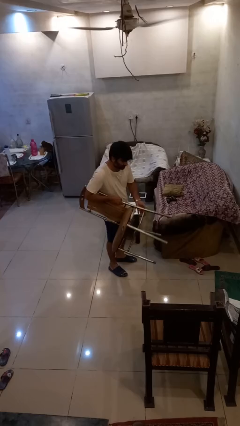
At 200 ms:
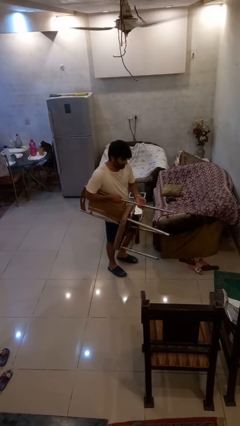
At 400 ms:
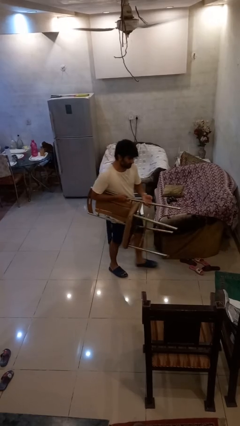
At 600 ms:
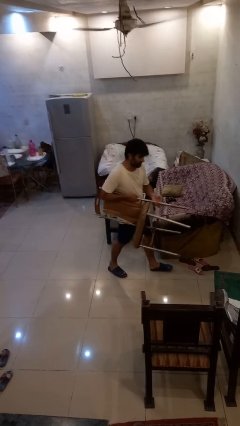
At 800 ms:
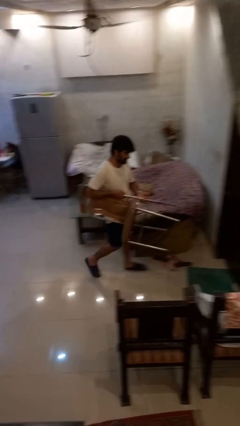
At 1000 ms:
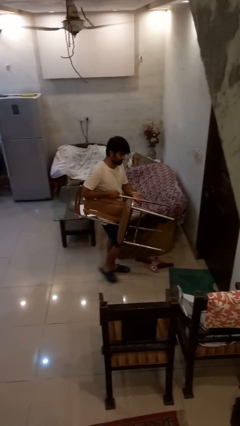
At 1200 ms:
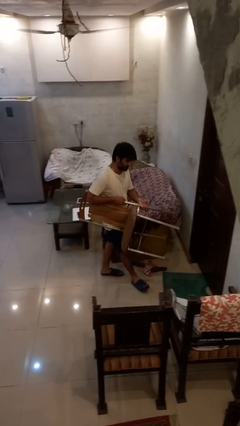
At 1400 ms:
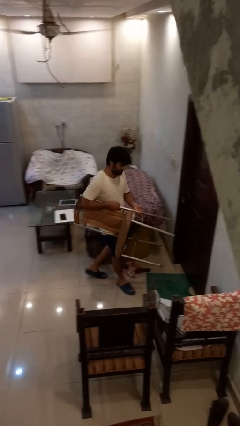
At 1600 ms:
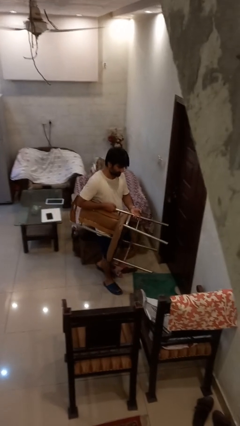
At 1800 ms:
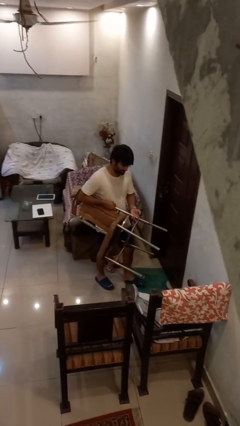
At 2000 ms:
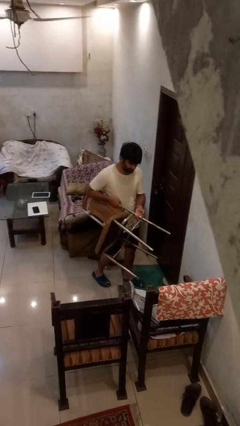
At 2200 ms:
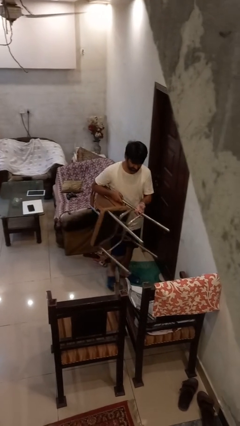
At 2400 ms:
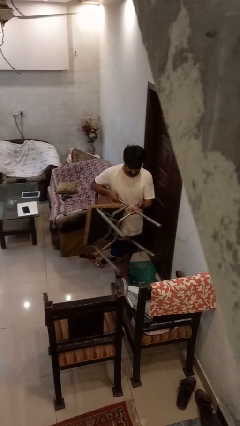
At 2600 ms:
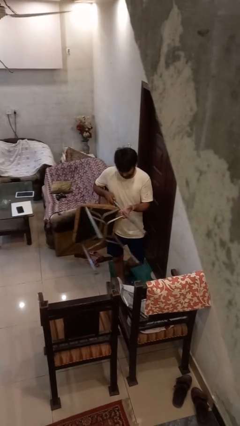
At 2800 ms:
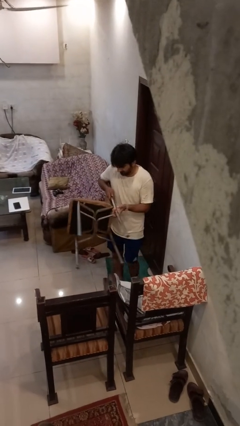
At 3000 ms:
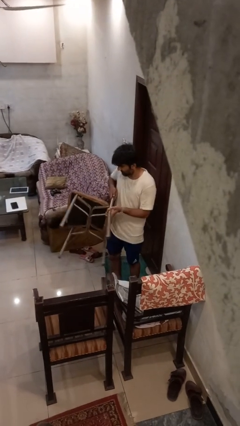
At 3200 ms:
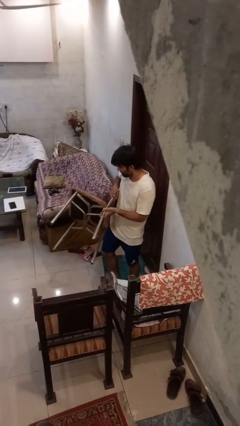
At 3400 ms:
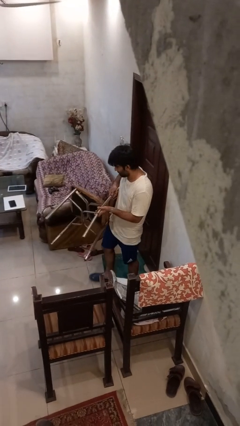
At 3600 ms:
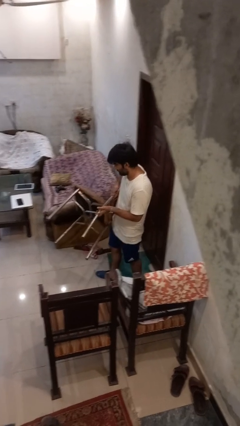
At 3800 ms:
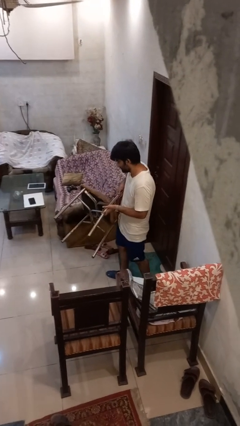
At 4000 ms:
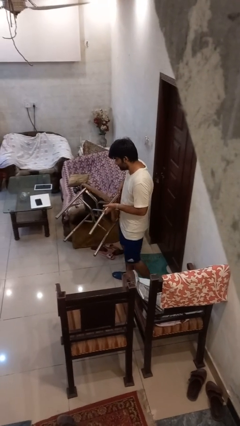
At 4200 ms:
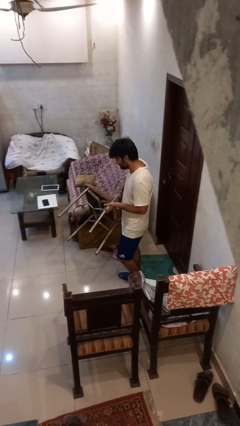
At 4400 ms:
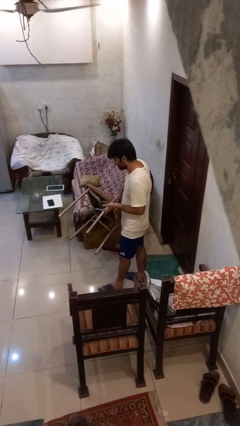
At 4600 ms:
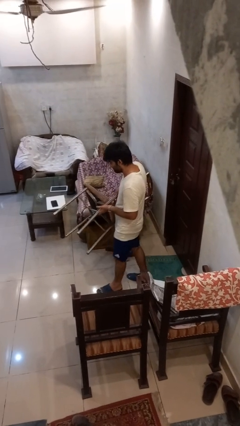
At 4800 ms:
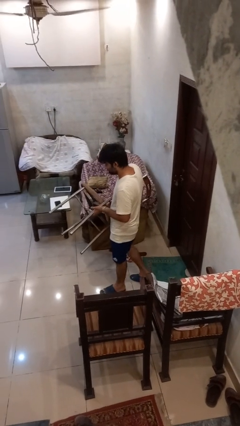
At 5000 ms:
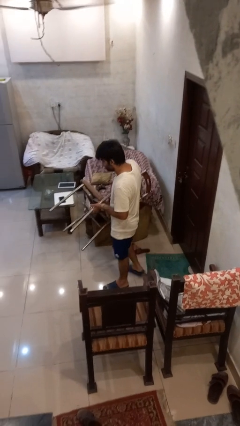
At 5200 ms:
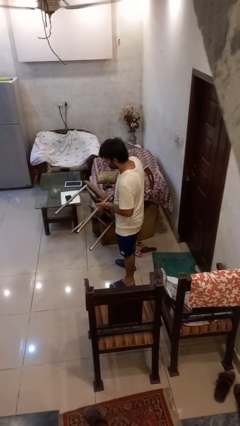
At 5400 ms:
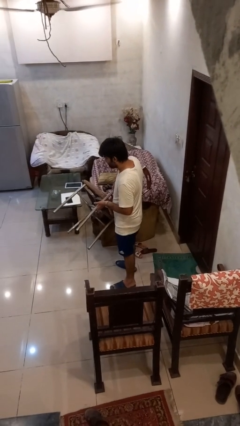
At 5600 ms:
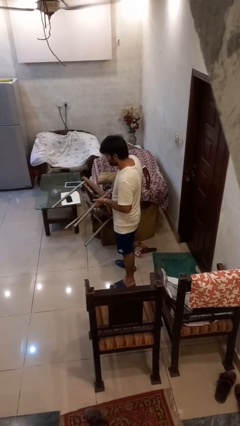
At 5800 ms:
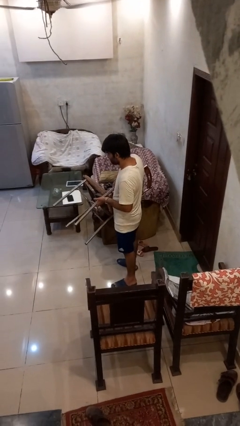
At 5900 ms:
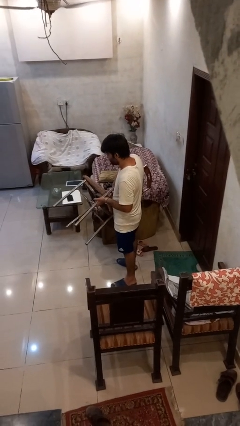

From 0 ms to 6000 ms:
person carries furniture

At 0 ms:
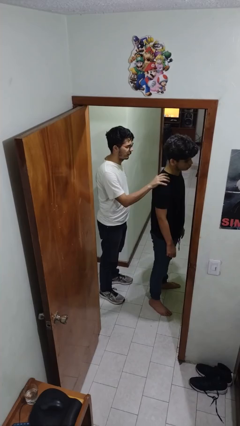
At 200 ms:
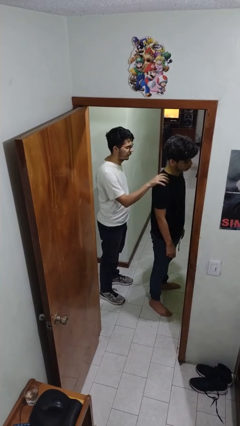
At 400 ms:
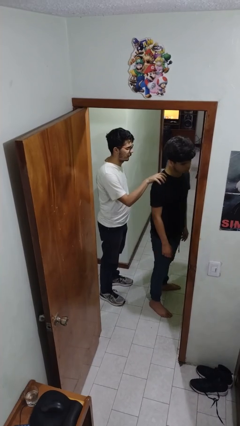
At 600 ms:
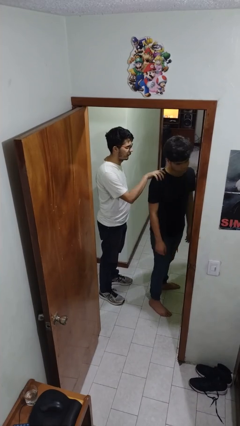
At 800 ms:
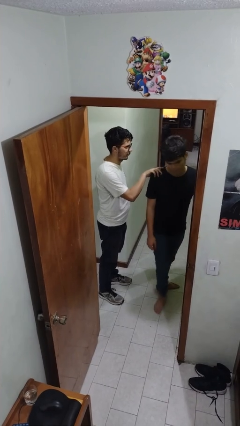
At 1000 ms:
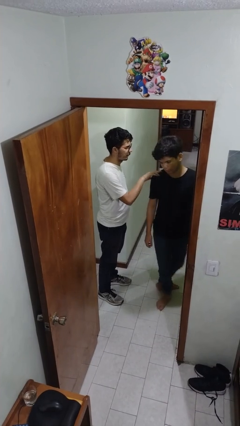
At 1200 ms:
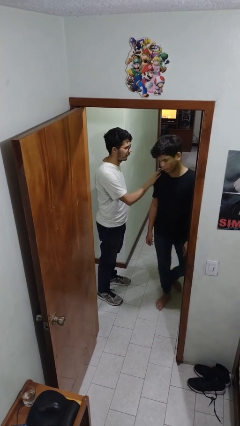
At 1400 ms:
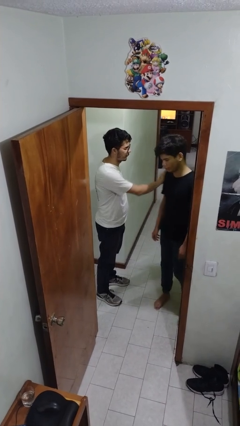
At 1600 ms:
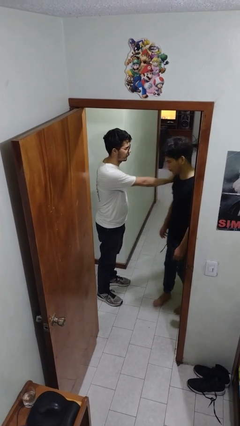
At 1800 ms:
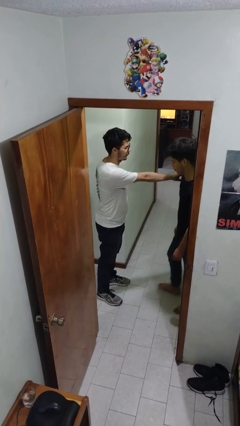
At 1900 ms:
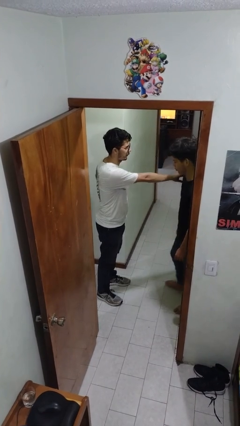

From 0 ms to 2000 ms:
person spins person around

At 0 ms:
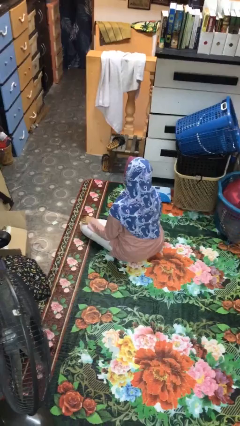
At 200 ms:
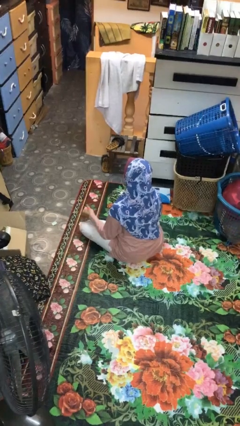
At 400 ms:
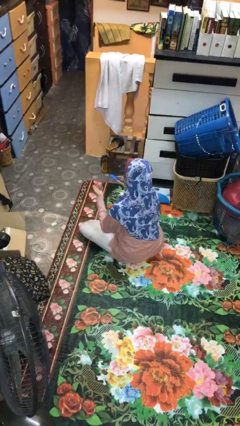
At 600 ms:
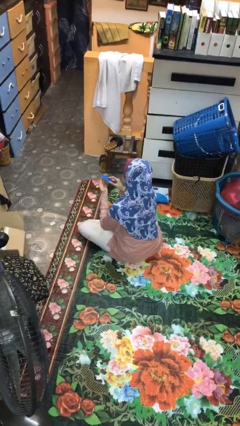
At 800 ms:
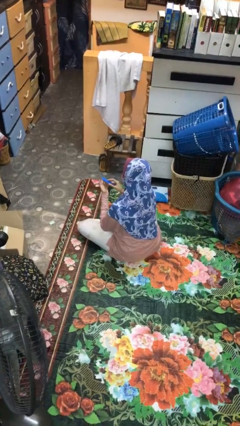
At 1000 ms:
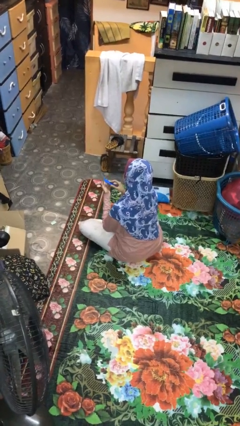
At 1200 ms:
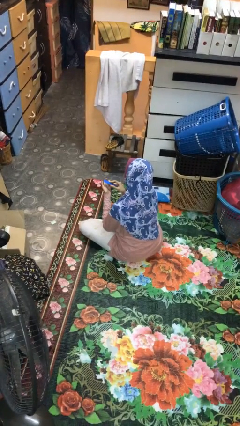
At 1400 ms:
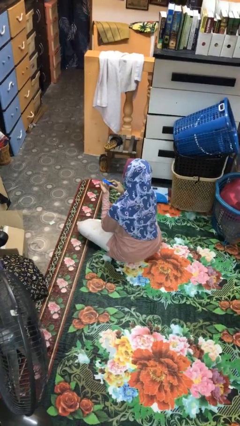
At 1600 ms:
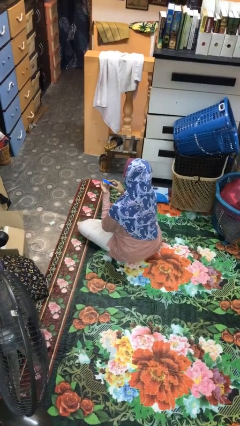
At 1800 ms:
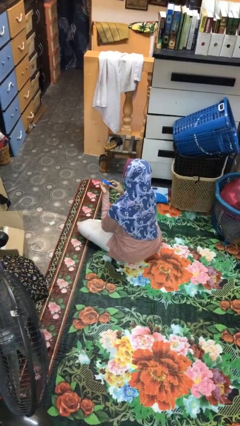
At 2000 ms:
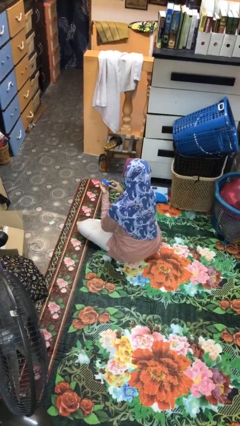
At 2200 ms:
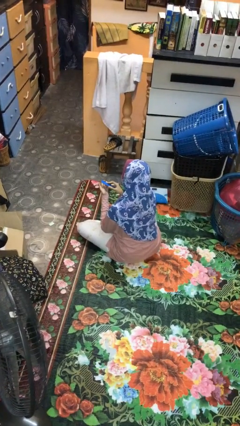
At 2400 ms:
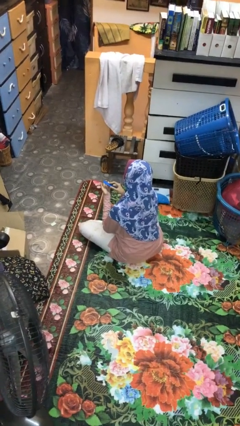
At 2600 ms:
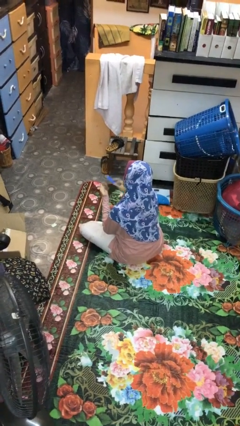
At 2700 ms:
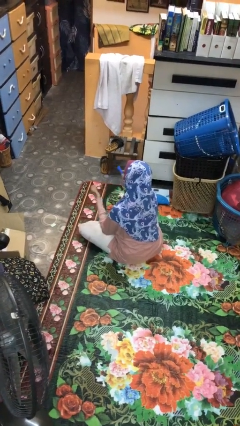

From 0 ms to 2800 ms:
person files fingernails

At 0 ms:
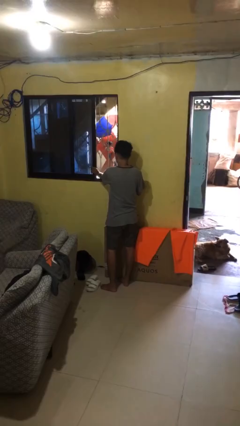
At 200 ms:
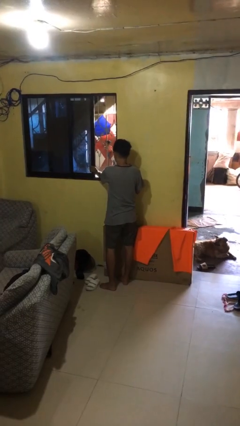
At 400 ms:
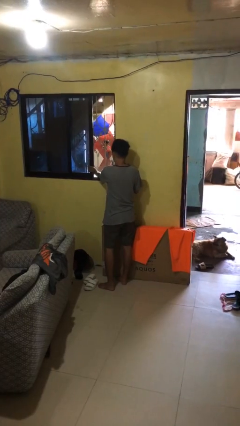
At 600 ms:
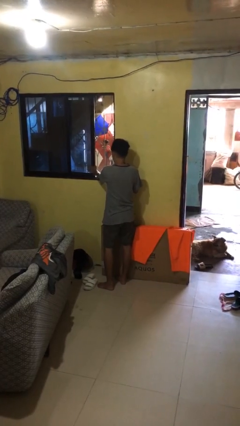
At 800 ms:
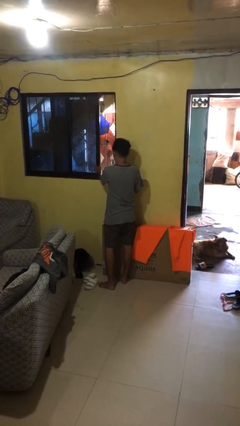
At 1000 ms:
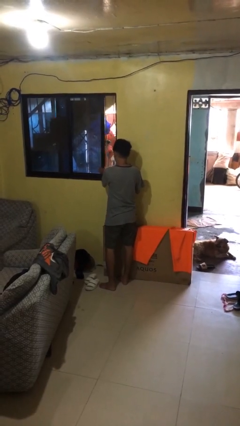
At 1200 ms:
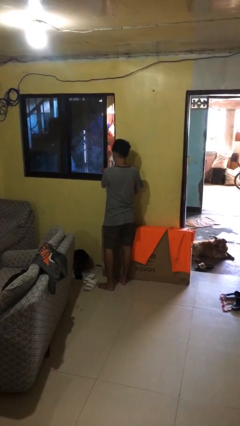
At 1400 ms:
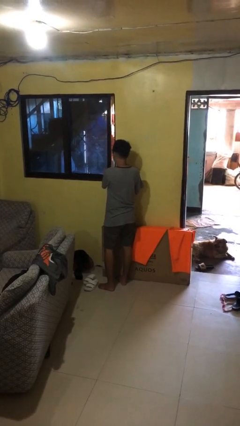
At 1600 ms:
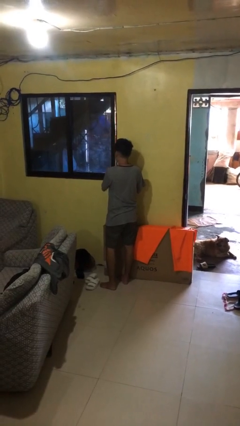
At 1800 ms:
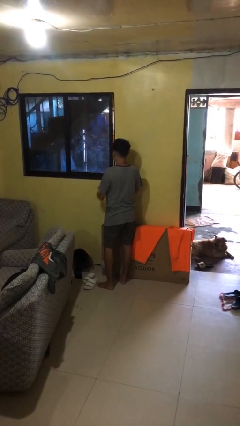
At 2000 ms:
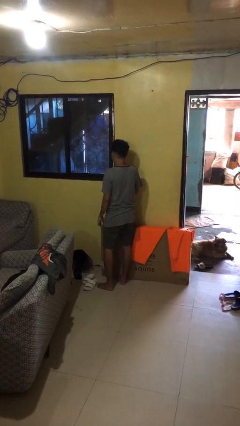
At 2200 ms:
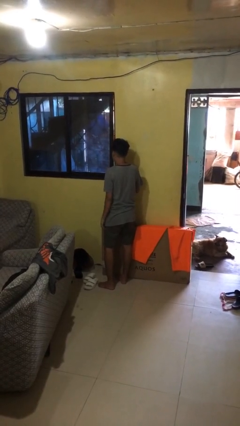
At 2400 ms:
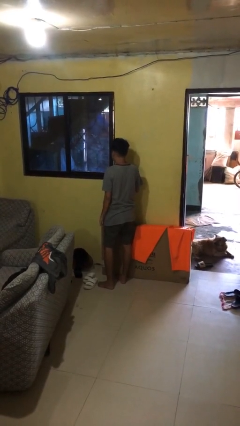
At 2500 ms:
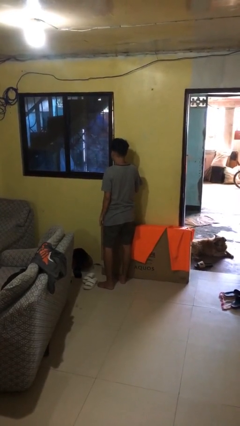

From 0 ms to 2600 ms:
person closes home window

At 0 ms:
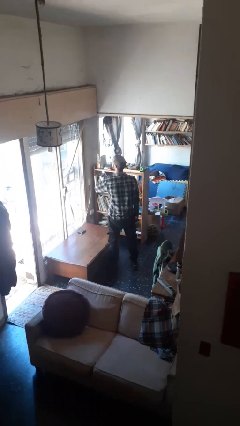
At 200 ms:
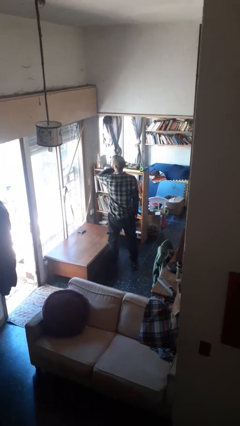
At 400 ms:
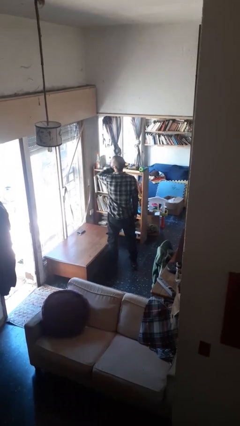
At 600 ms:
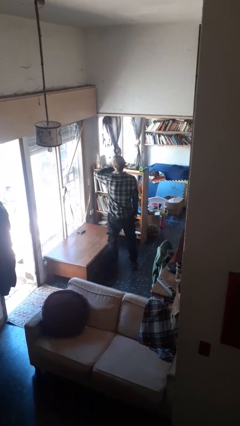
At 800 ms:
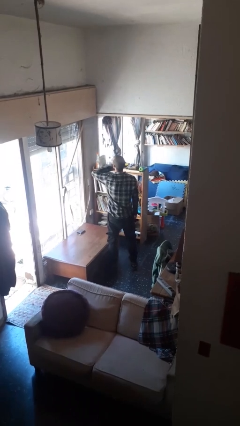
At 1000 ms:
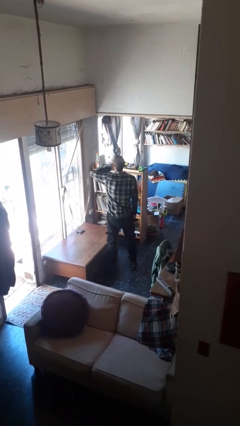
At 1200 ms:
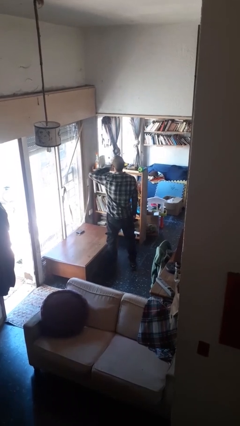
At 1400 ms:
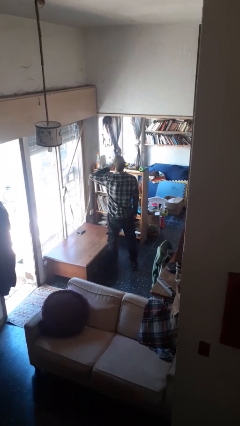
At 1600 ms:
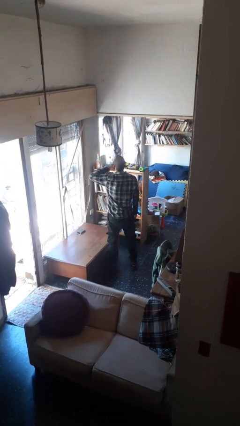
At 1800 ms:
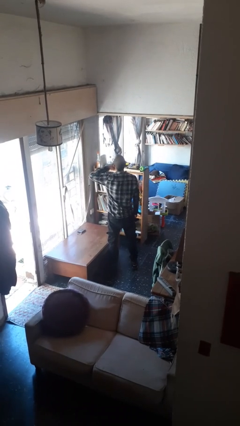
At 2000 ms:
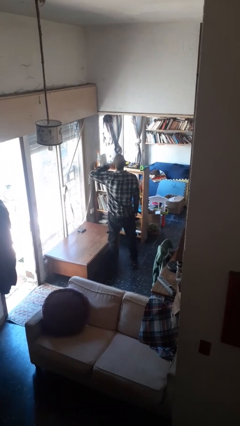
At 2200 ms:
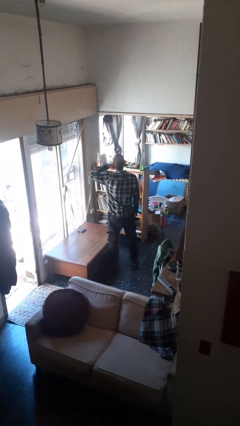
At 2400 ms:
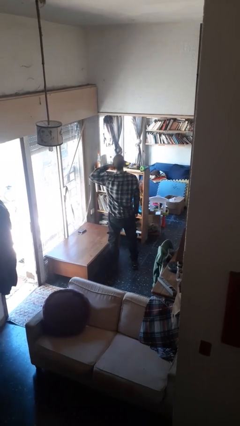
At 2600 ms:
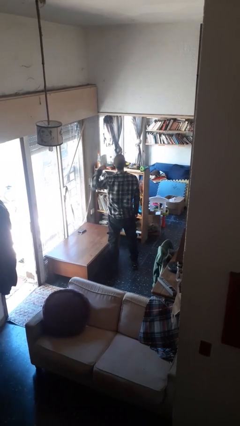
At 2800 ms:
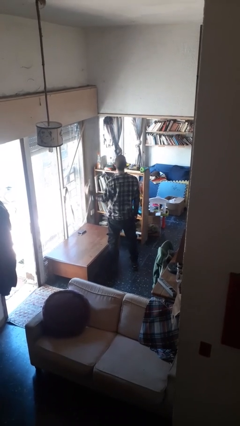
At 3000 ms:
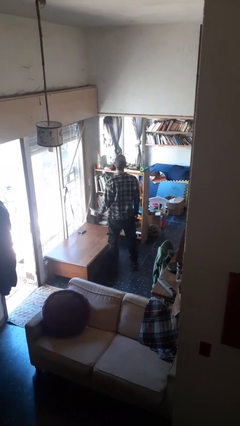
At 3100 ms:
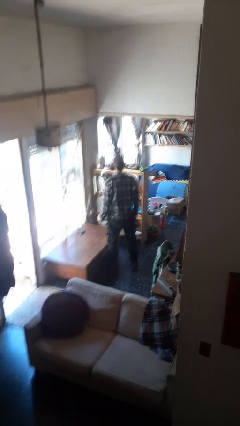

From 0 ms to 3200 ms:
person gestures cut

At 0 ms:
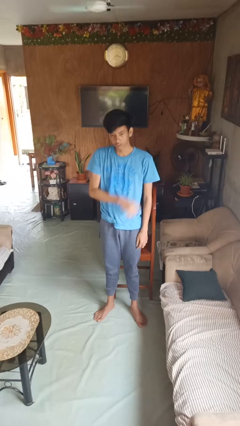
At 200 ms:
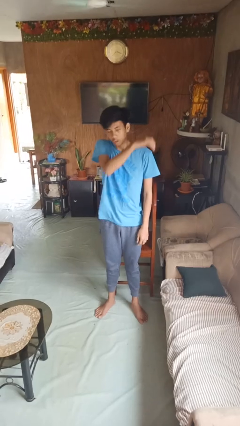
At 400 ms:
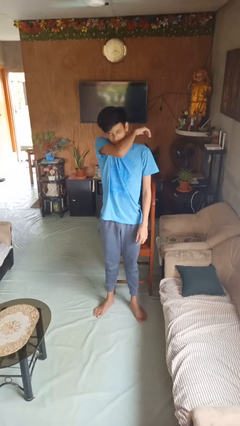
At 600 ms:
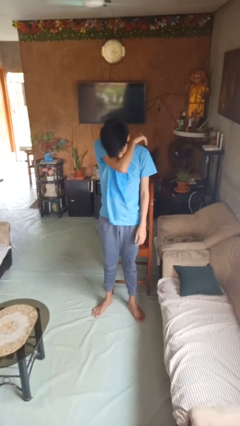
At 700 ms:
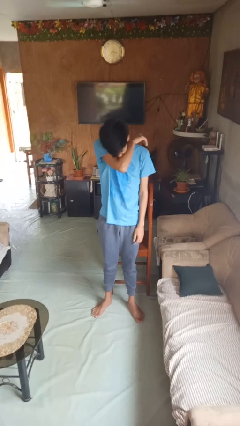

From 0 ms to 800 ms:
person sneezes into arm
